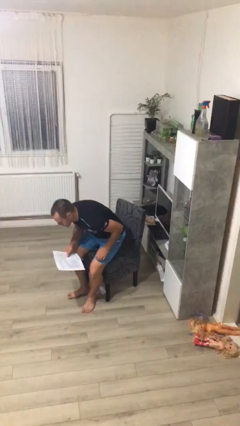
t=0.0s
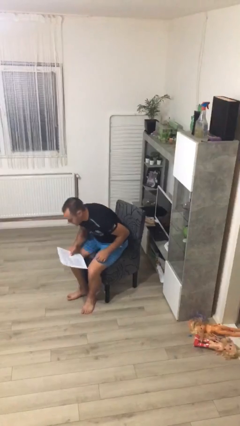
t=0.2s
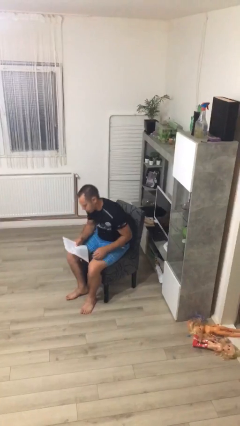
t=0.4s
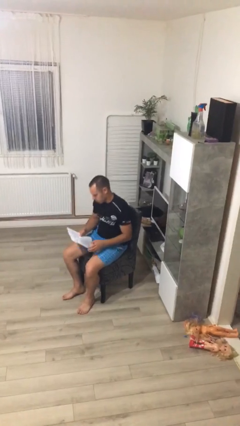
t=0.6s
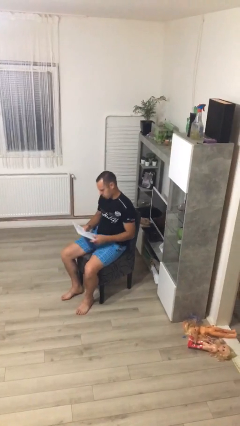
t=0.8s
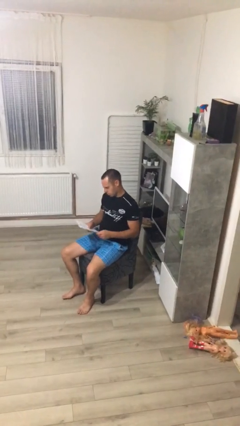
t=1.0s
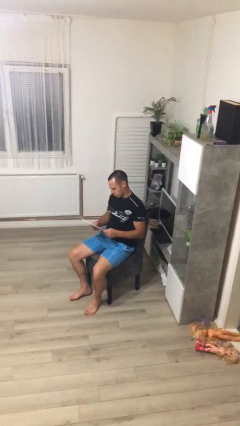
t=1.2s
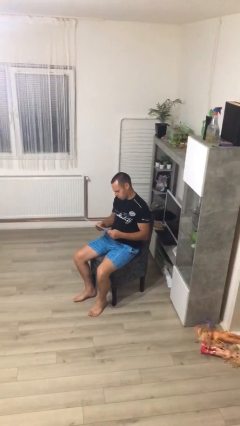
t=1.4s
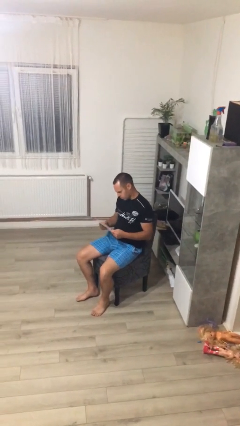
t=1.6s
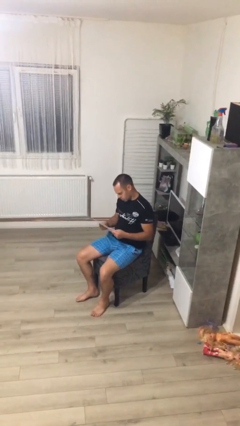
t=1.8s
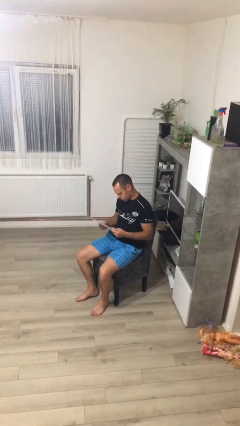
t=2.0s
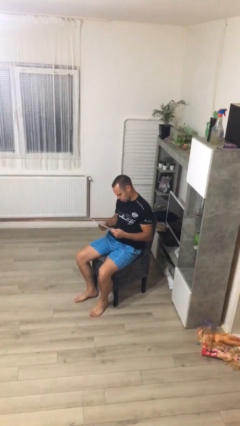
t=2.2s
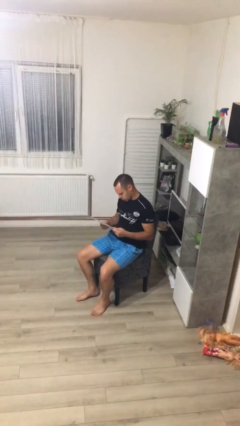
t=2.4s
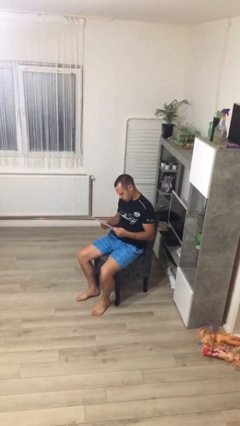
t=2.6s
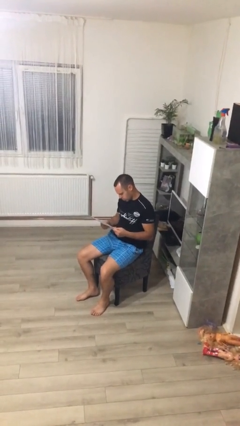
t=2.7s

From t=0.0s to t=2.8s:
person sits down

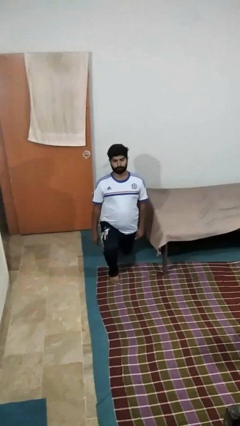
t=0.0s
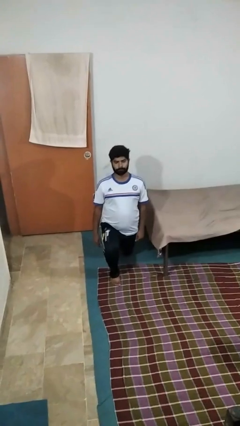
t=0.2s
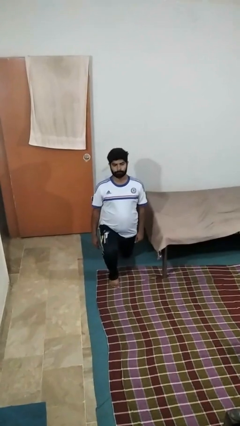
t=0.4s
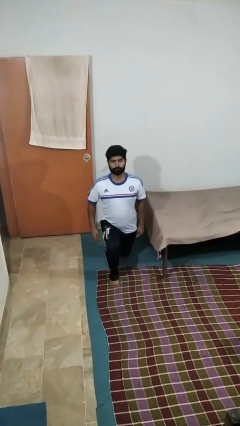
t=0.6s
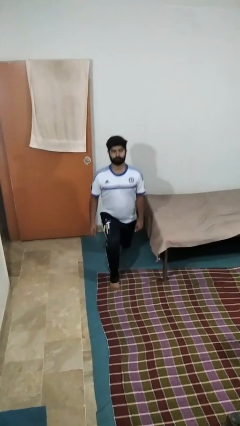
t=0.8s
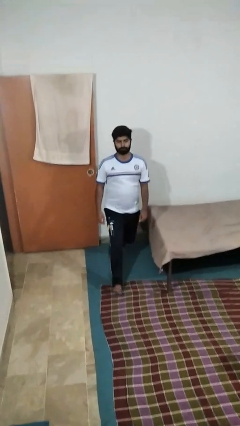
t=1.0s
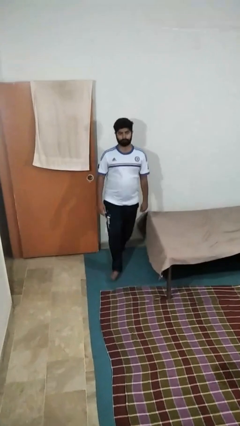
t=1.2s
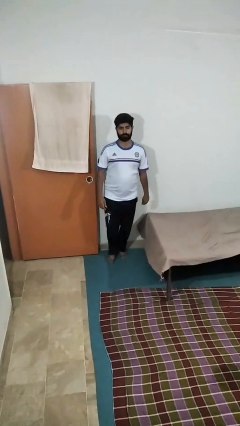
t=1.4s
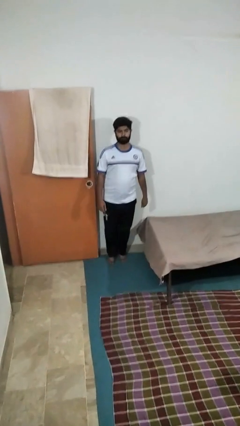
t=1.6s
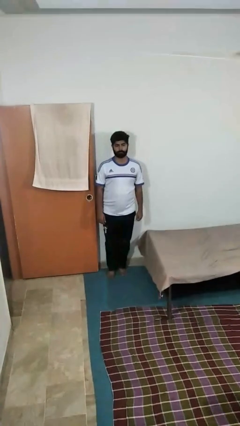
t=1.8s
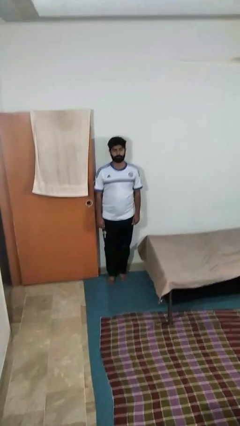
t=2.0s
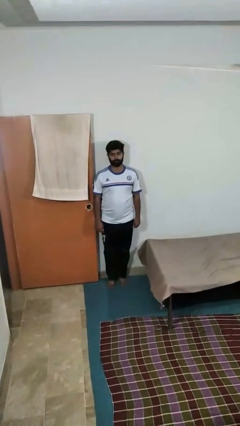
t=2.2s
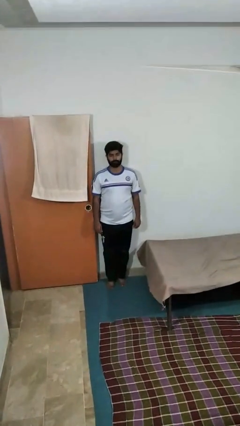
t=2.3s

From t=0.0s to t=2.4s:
person stands up from floor

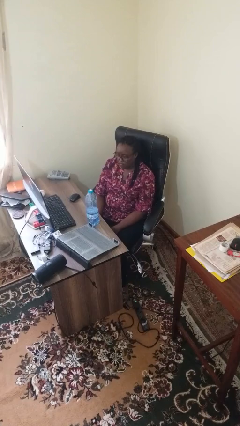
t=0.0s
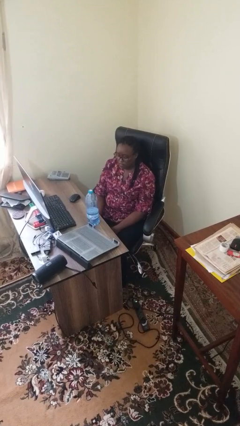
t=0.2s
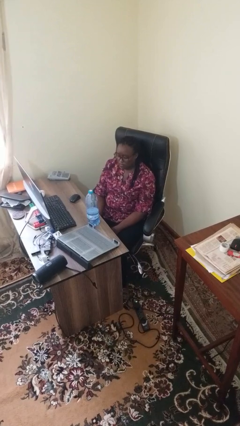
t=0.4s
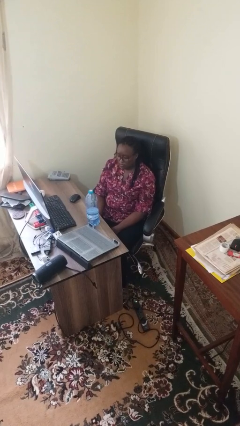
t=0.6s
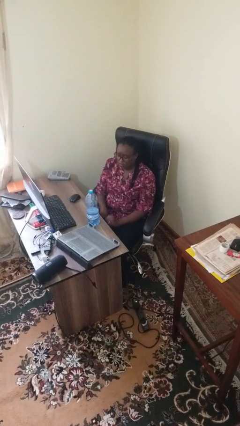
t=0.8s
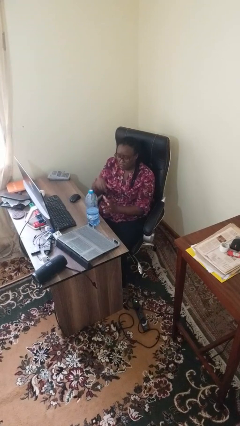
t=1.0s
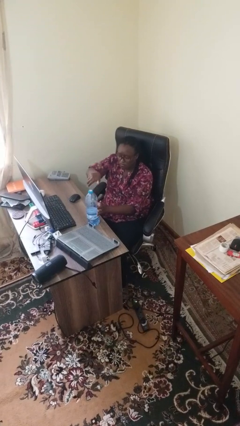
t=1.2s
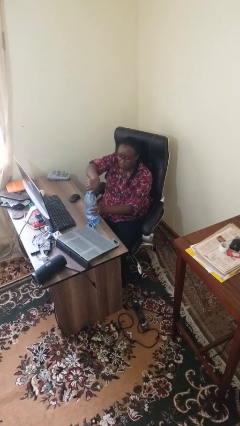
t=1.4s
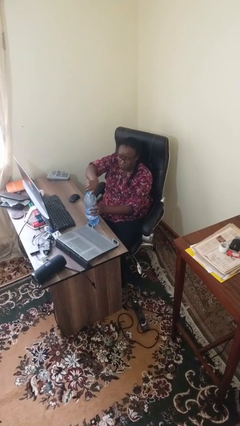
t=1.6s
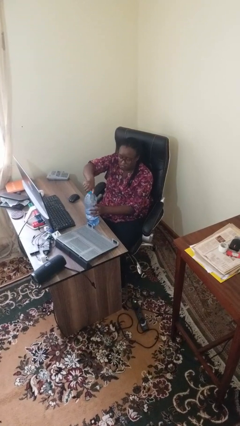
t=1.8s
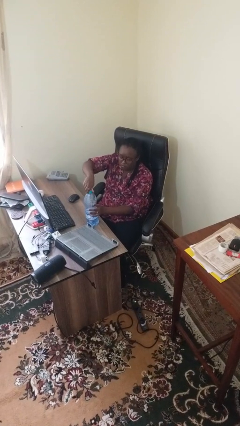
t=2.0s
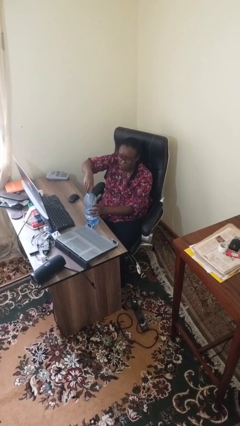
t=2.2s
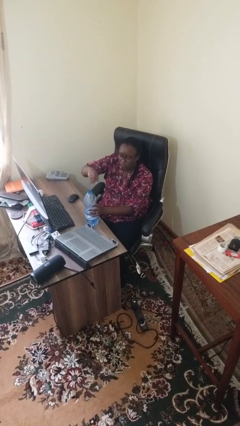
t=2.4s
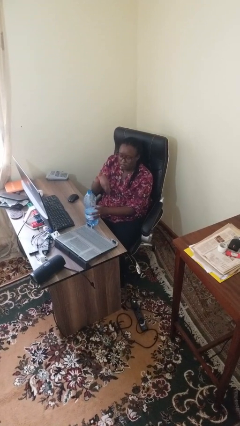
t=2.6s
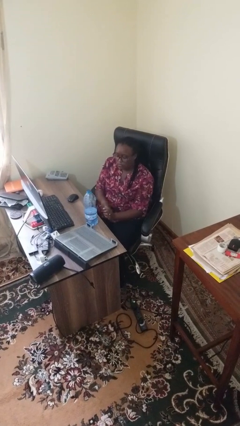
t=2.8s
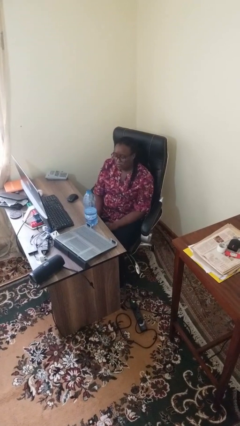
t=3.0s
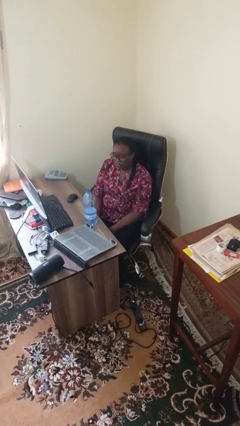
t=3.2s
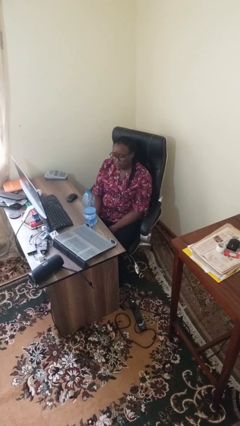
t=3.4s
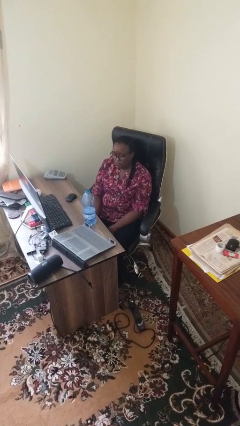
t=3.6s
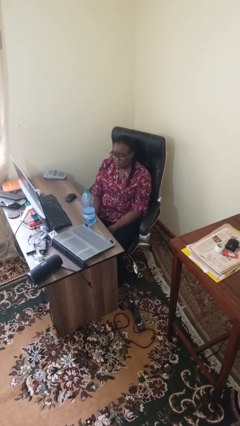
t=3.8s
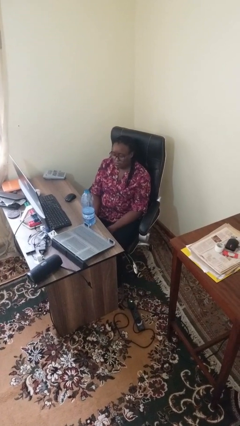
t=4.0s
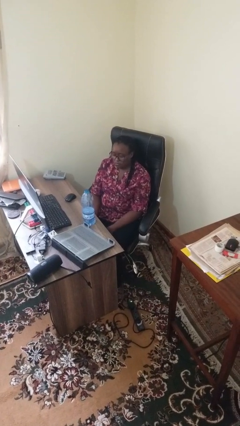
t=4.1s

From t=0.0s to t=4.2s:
person unscrews lid from bottle

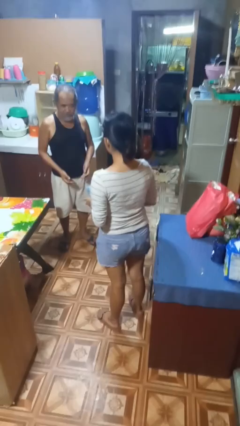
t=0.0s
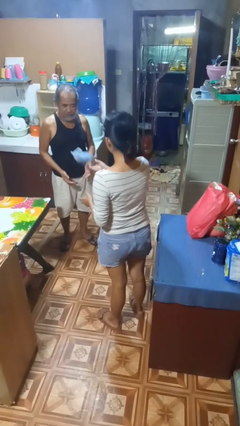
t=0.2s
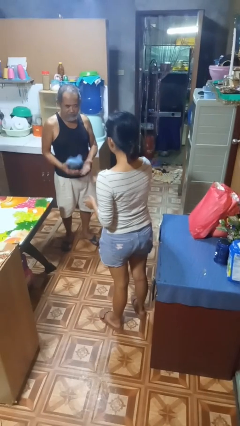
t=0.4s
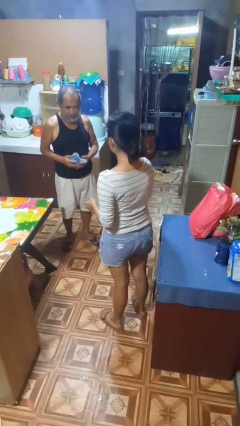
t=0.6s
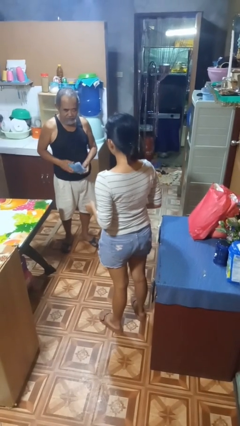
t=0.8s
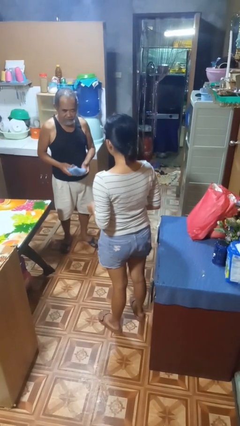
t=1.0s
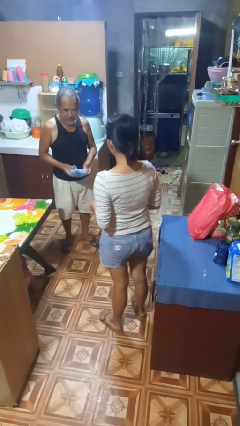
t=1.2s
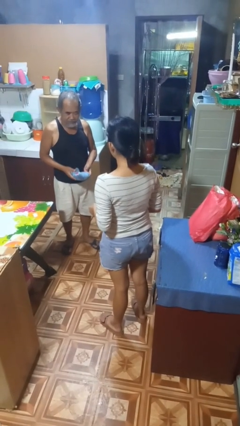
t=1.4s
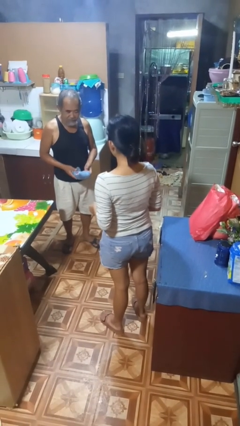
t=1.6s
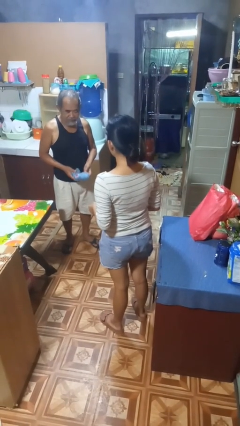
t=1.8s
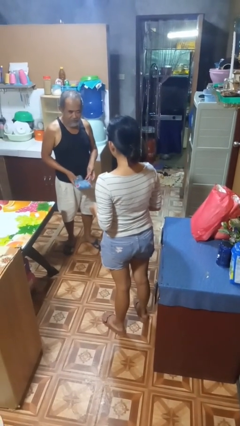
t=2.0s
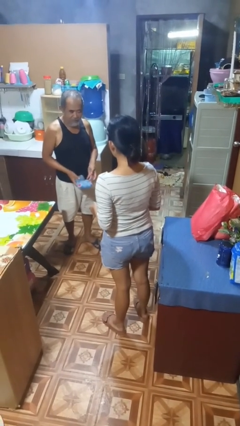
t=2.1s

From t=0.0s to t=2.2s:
person throws object to person

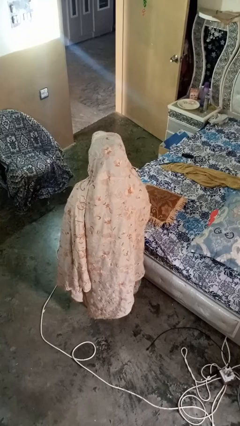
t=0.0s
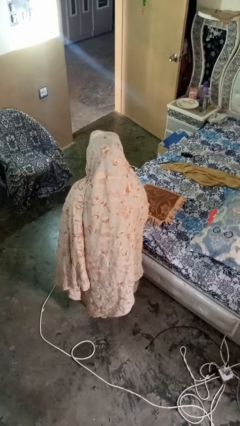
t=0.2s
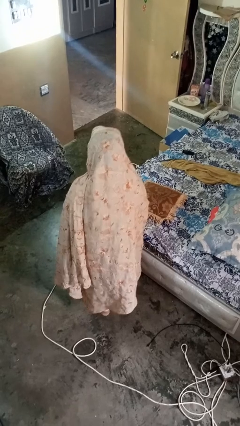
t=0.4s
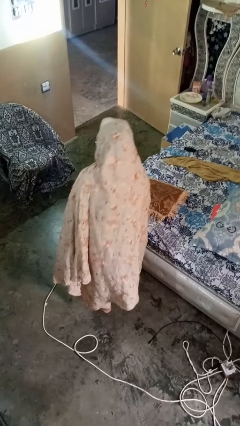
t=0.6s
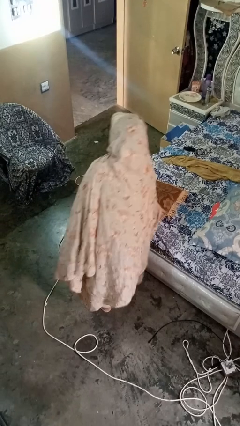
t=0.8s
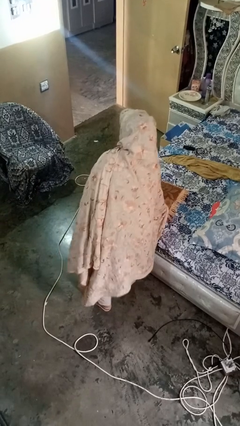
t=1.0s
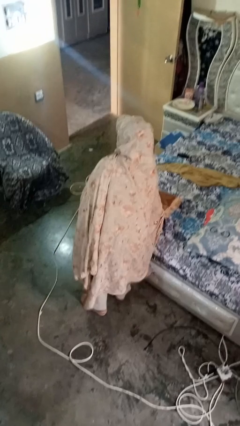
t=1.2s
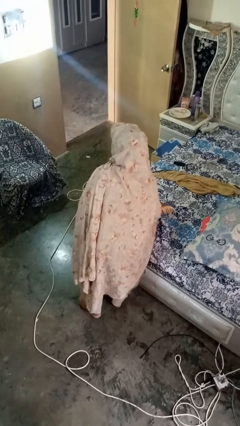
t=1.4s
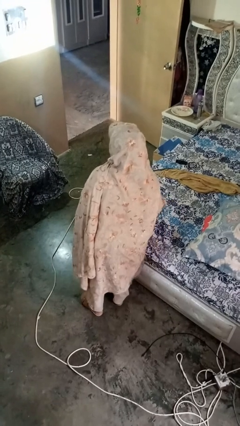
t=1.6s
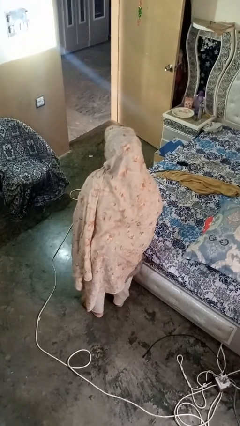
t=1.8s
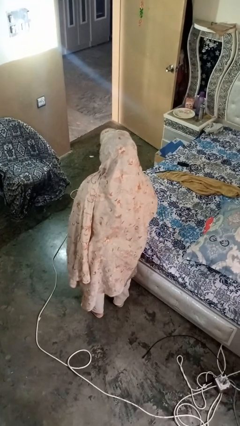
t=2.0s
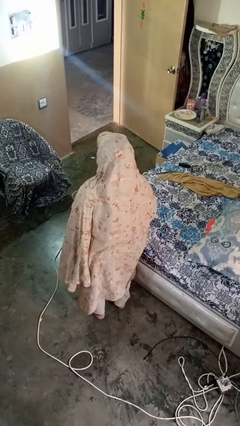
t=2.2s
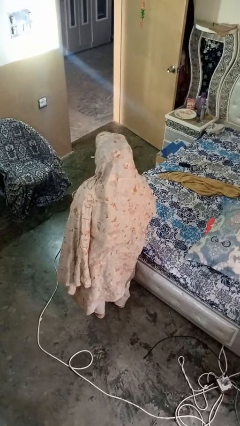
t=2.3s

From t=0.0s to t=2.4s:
person picks up object from bed

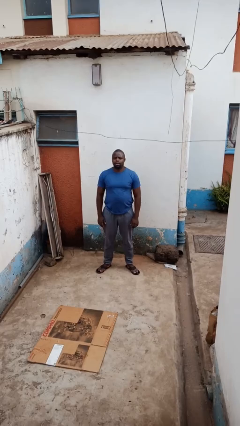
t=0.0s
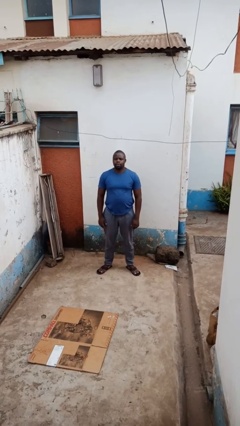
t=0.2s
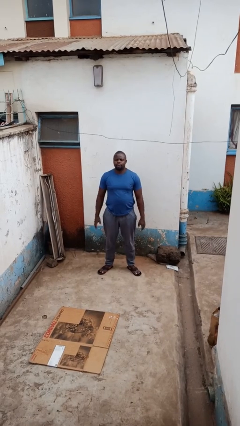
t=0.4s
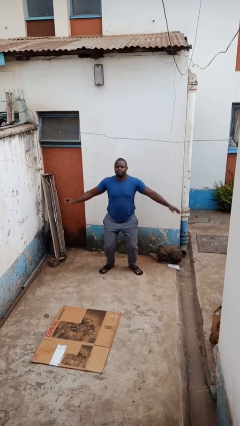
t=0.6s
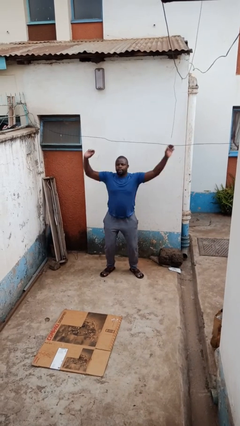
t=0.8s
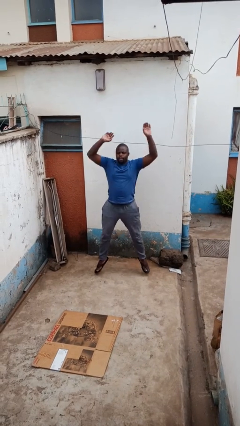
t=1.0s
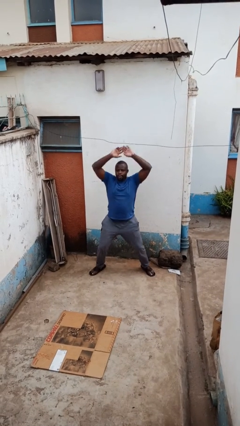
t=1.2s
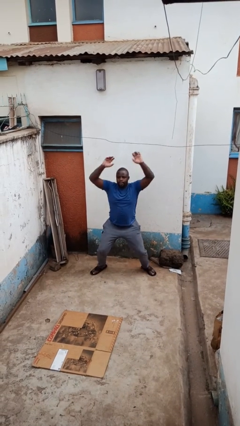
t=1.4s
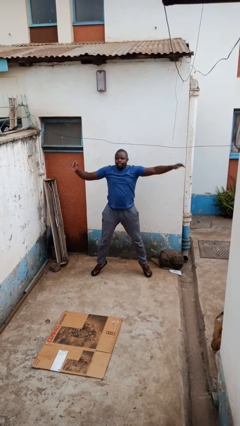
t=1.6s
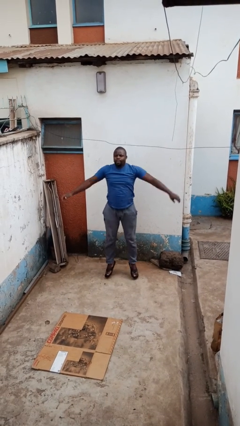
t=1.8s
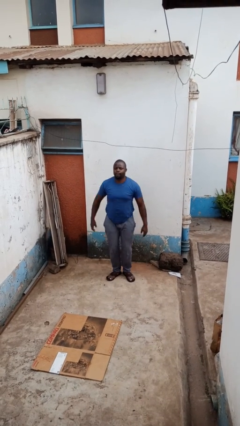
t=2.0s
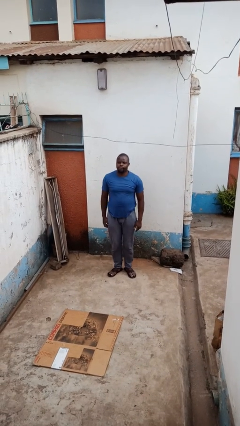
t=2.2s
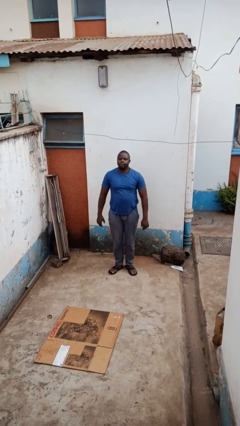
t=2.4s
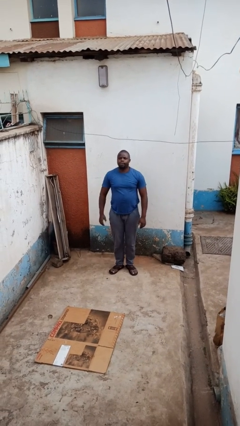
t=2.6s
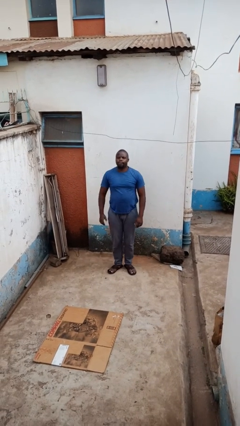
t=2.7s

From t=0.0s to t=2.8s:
person exercises with jumping jacks

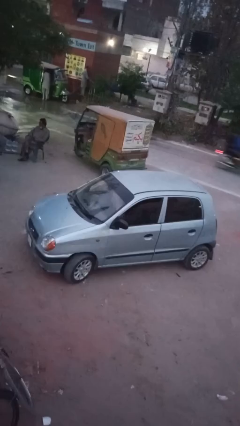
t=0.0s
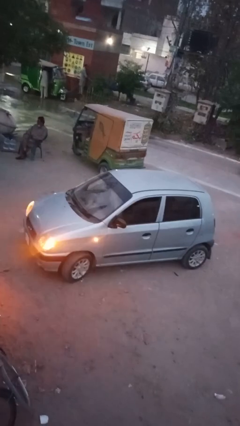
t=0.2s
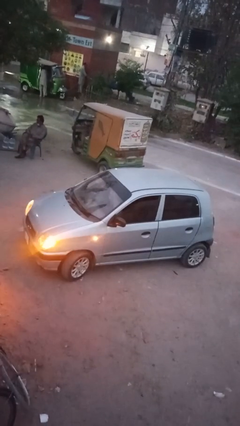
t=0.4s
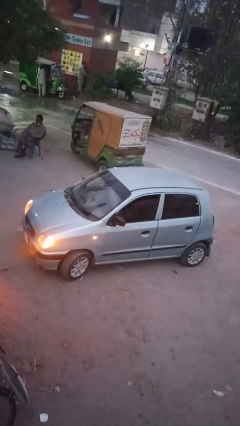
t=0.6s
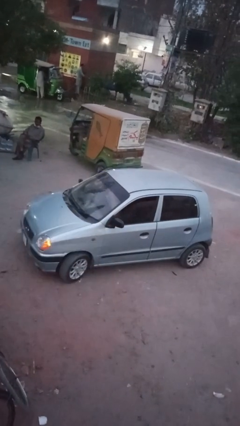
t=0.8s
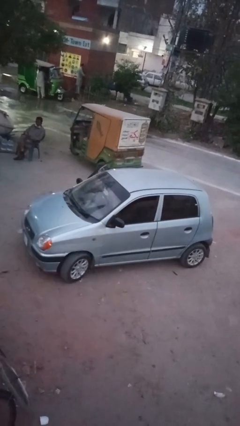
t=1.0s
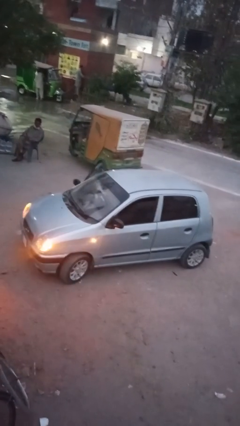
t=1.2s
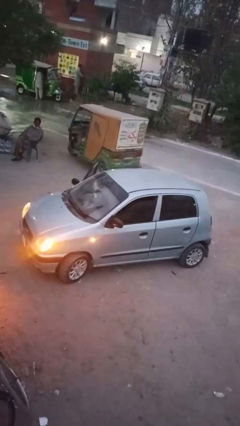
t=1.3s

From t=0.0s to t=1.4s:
car drops off person
